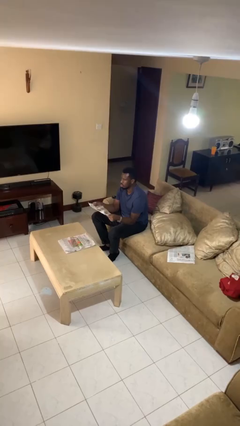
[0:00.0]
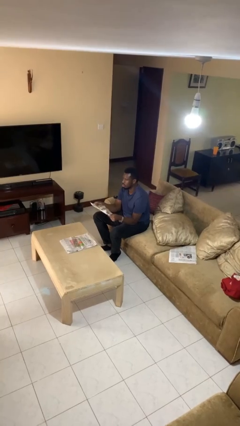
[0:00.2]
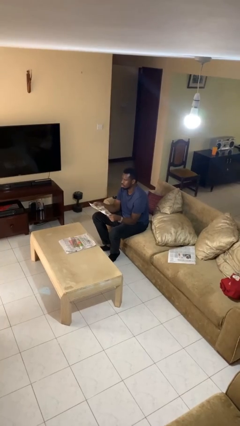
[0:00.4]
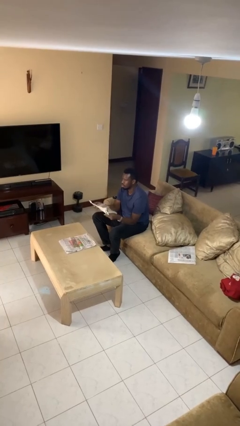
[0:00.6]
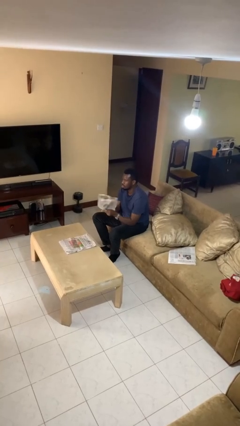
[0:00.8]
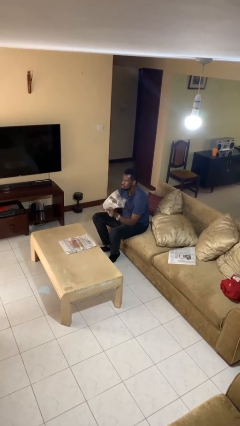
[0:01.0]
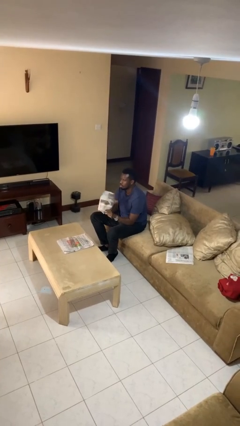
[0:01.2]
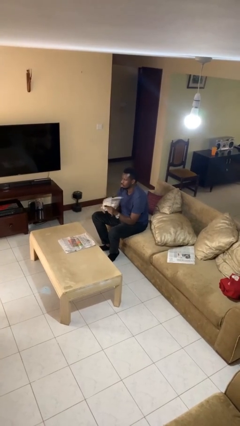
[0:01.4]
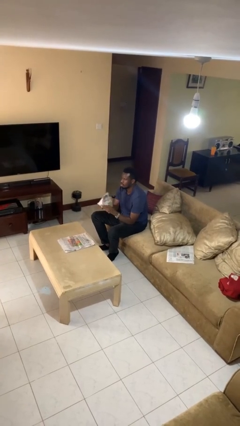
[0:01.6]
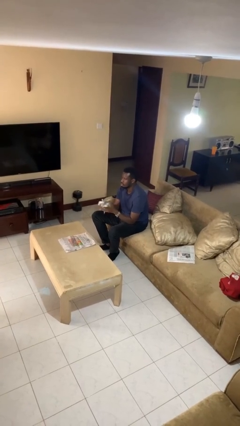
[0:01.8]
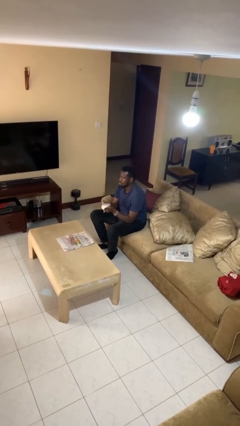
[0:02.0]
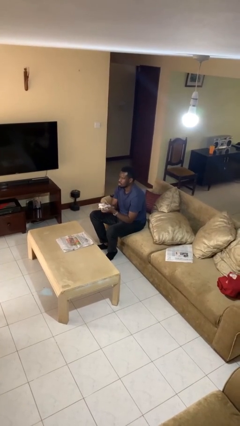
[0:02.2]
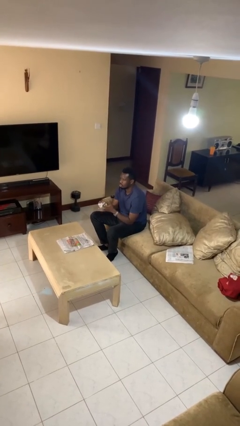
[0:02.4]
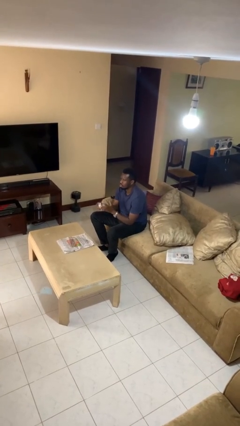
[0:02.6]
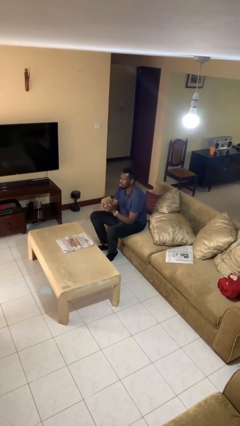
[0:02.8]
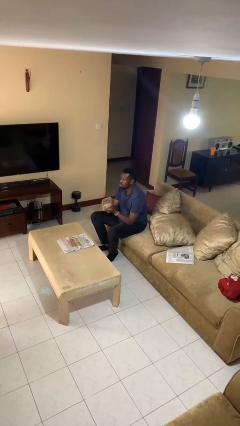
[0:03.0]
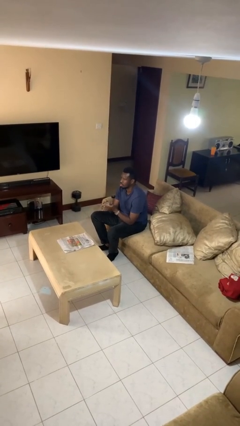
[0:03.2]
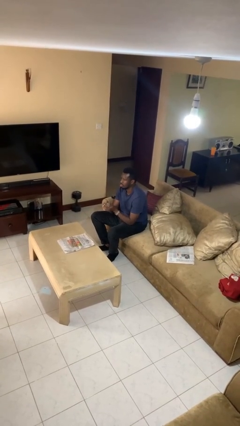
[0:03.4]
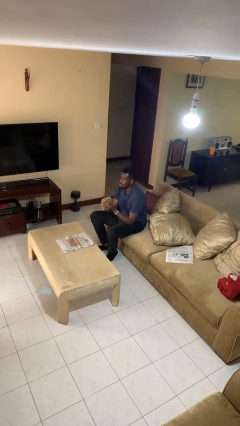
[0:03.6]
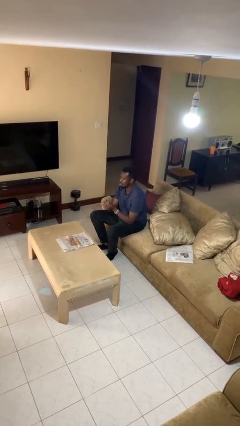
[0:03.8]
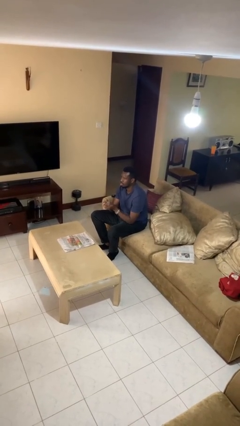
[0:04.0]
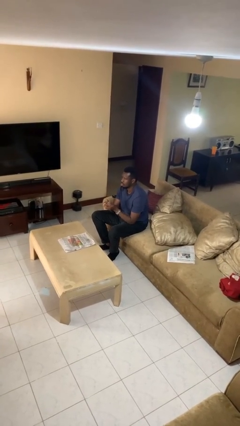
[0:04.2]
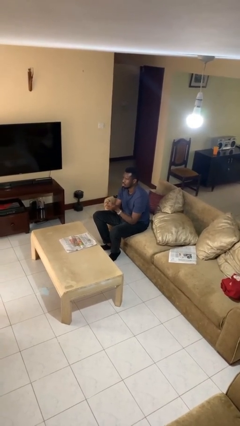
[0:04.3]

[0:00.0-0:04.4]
person crumples paper

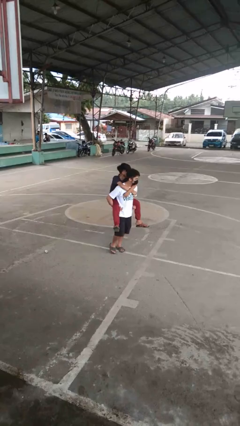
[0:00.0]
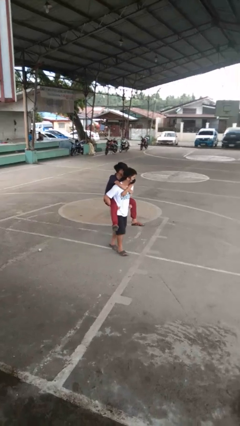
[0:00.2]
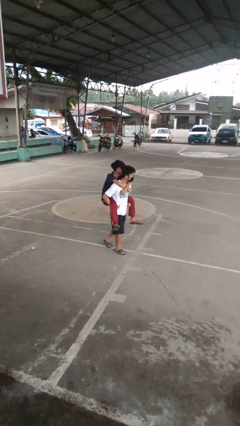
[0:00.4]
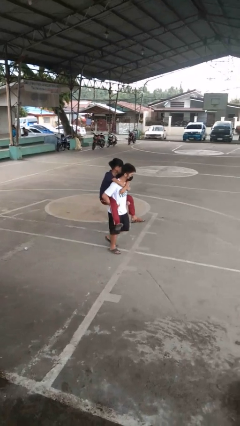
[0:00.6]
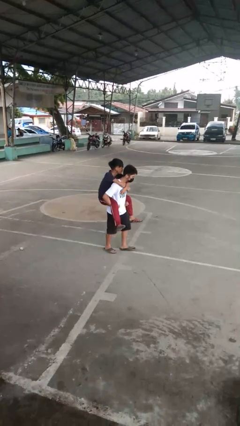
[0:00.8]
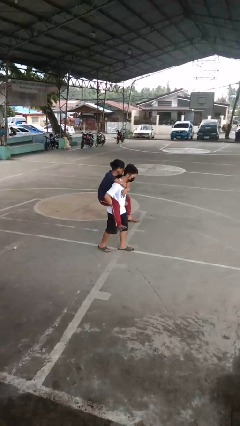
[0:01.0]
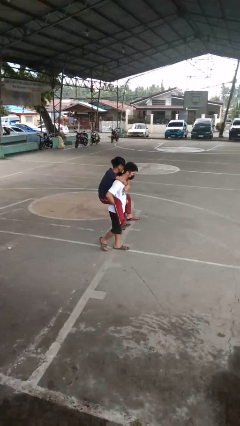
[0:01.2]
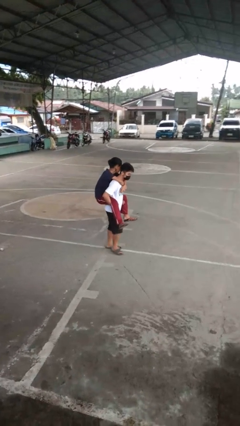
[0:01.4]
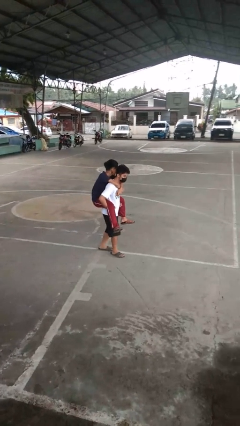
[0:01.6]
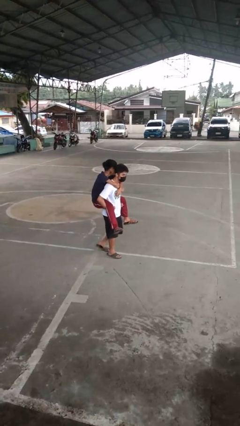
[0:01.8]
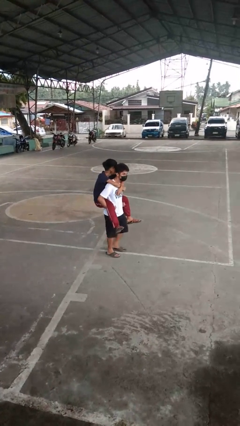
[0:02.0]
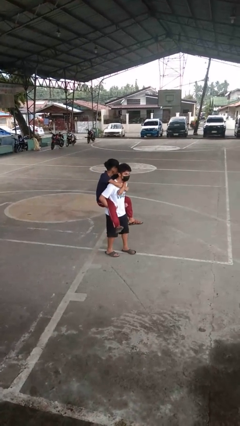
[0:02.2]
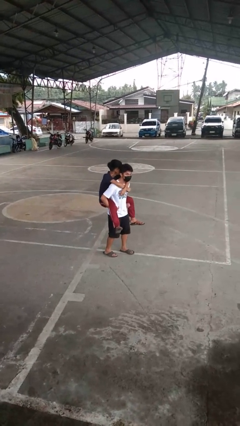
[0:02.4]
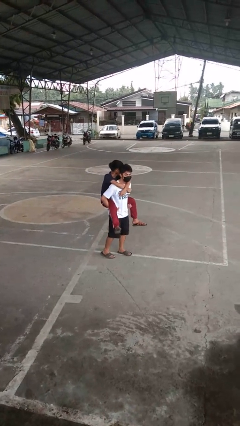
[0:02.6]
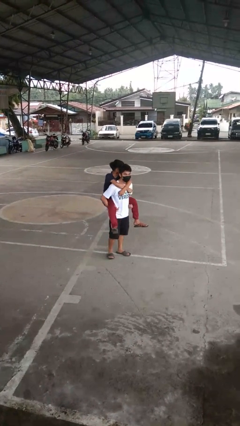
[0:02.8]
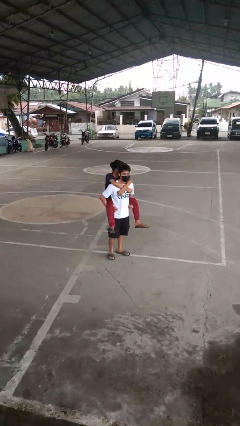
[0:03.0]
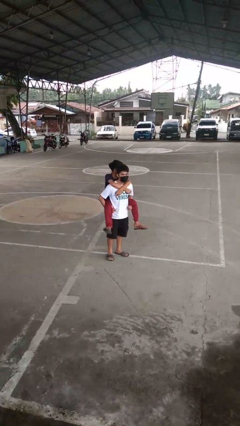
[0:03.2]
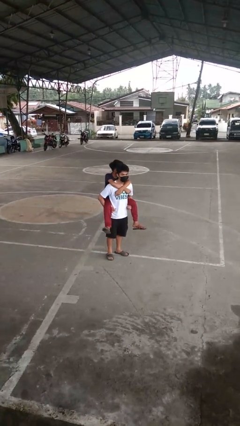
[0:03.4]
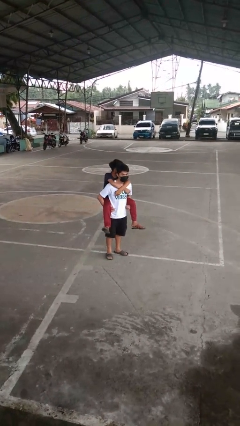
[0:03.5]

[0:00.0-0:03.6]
person carries person on back

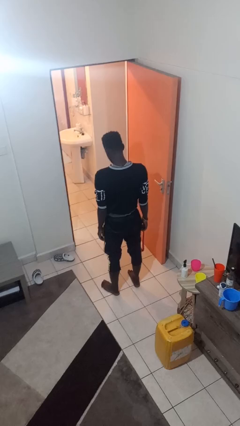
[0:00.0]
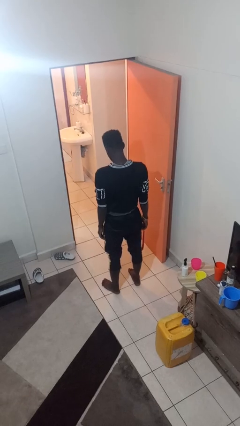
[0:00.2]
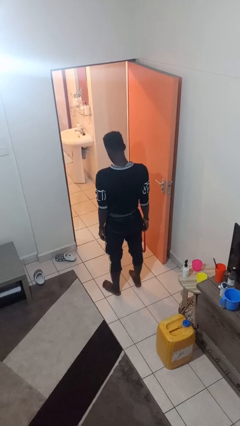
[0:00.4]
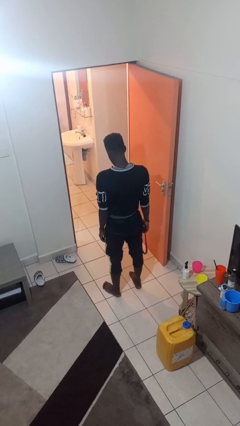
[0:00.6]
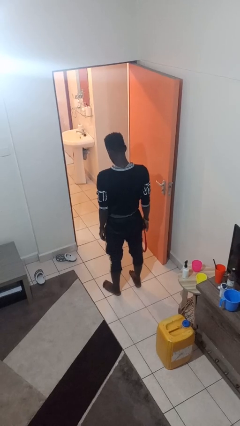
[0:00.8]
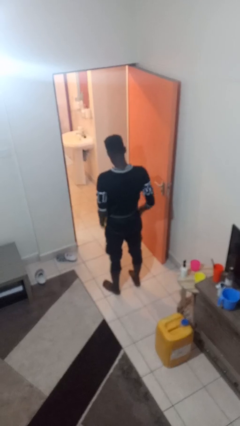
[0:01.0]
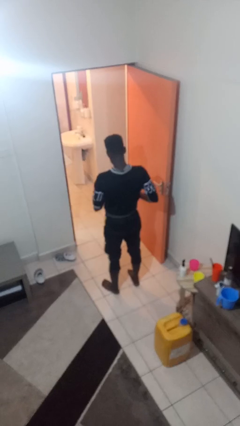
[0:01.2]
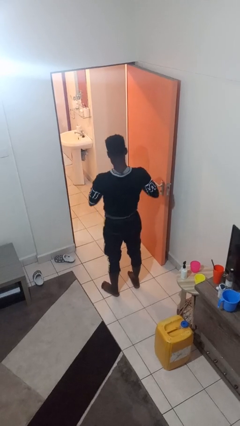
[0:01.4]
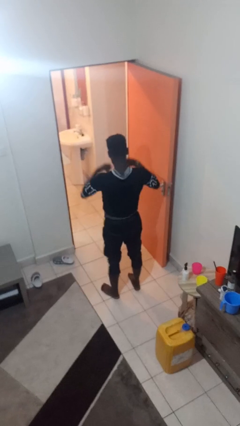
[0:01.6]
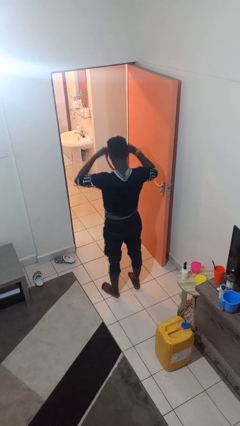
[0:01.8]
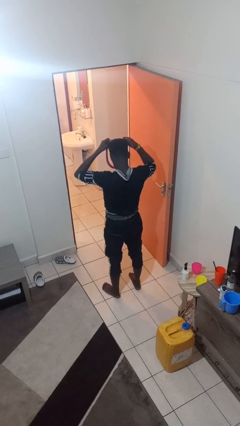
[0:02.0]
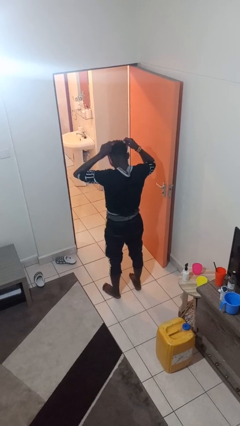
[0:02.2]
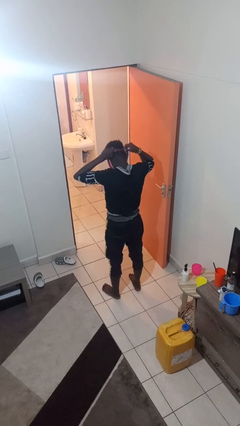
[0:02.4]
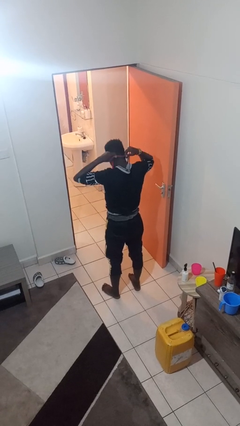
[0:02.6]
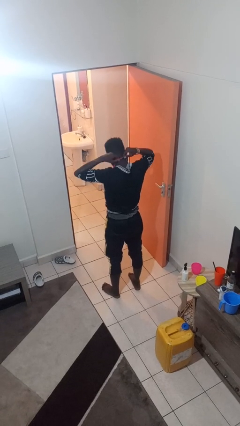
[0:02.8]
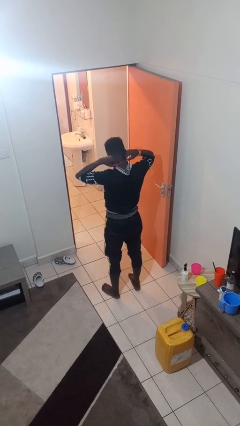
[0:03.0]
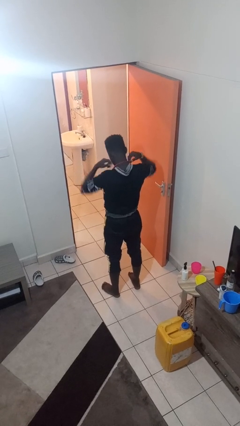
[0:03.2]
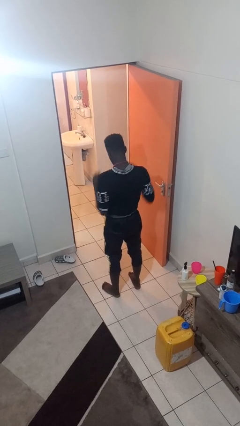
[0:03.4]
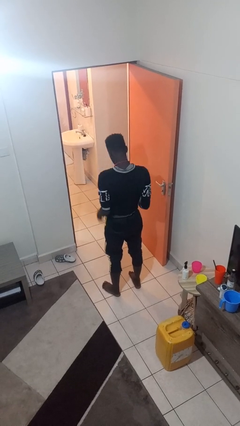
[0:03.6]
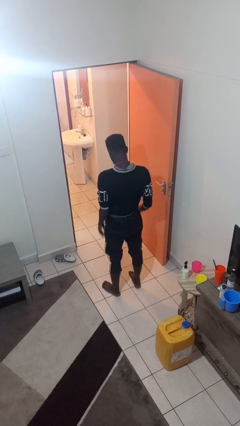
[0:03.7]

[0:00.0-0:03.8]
person puts on necklace

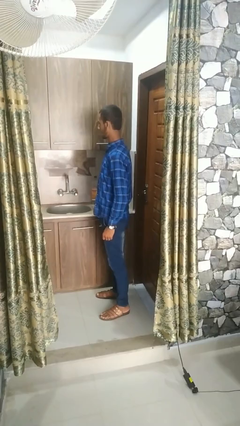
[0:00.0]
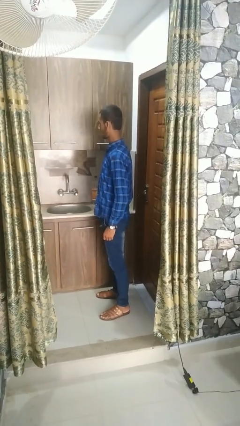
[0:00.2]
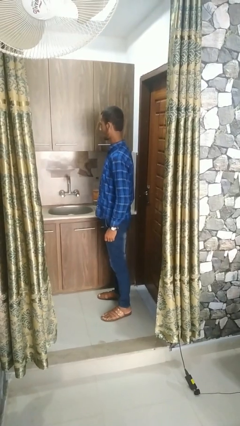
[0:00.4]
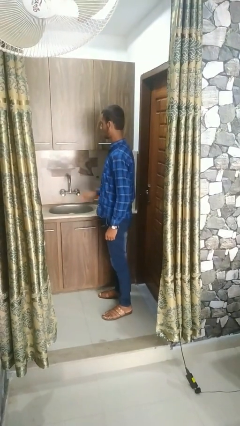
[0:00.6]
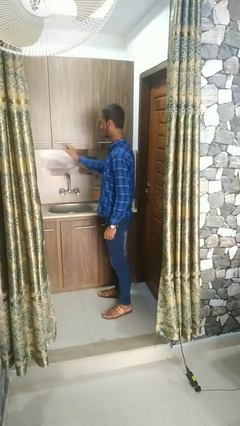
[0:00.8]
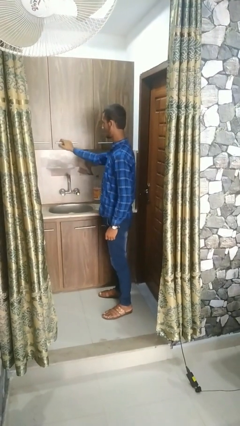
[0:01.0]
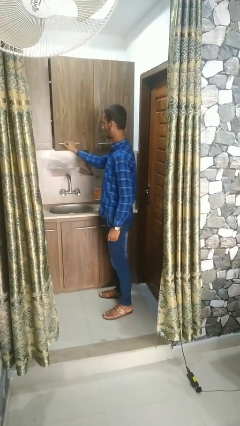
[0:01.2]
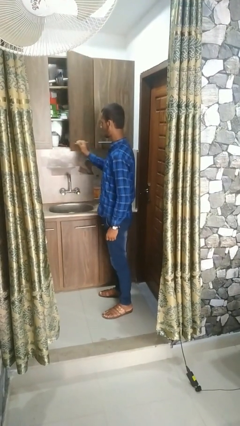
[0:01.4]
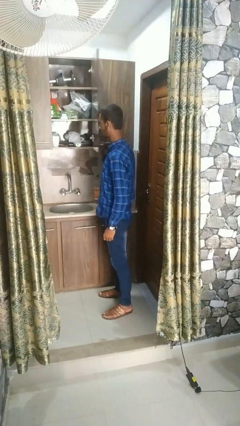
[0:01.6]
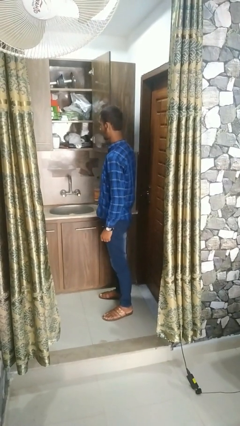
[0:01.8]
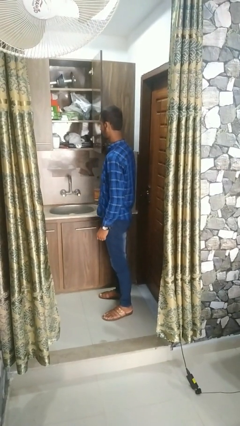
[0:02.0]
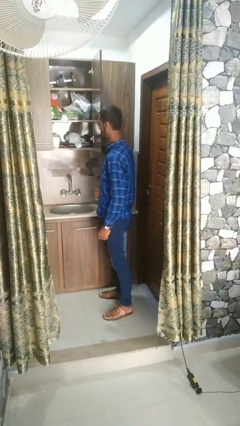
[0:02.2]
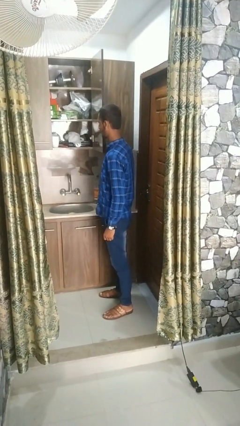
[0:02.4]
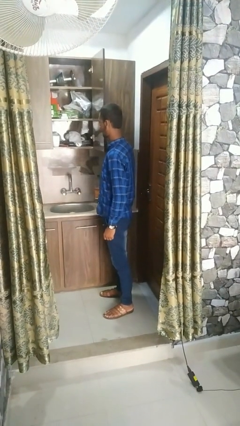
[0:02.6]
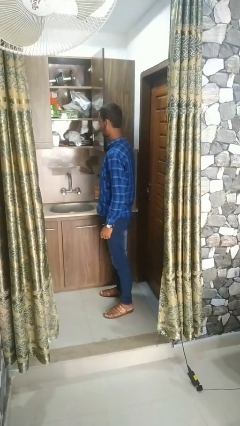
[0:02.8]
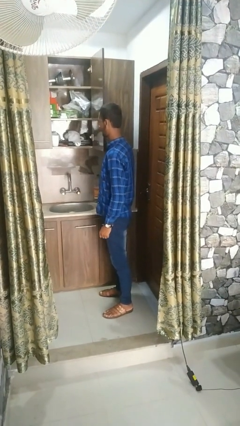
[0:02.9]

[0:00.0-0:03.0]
person opens cabinet

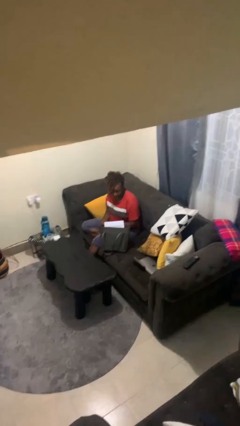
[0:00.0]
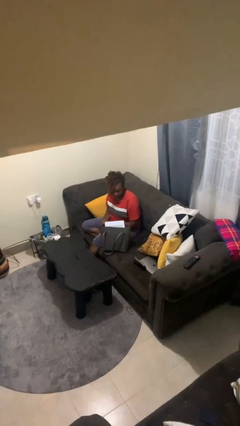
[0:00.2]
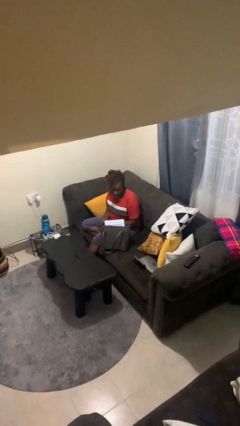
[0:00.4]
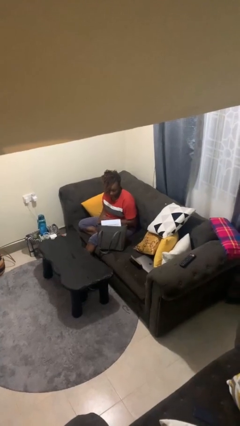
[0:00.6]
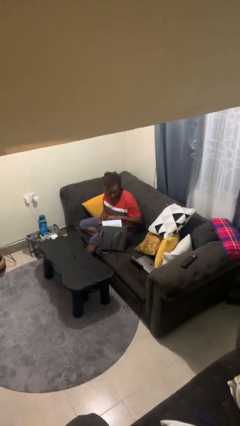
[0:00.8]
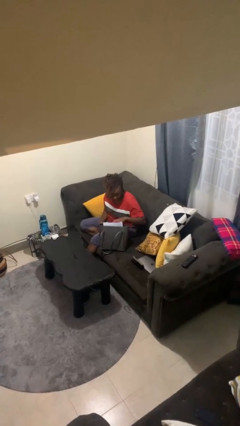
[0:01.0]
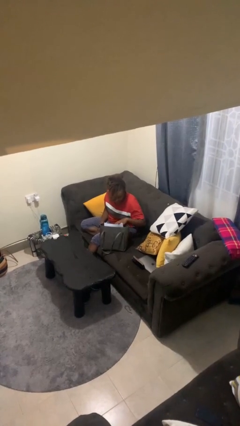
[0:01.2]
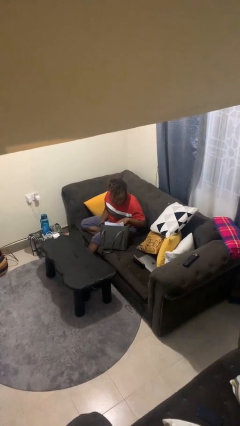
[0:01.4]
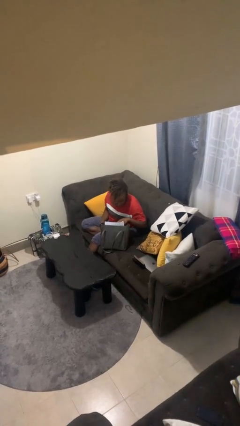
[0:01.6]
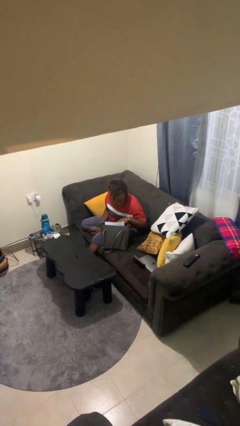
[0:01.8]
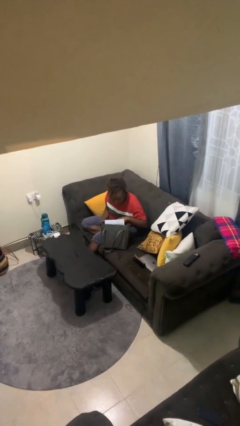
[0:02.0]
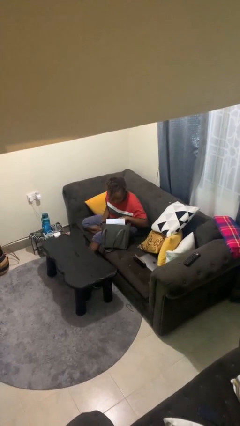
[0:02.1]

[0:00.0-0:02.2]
person searches in purse

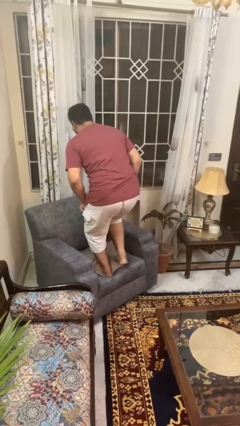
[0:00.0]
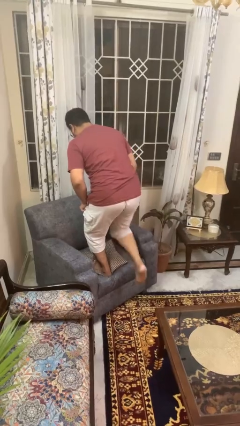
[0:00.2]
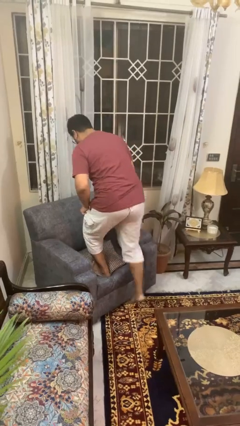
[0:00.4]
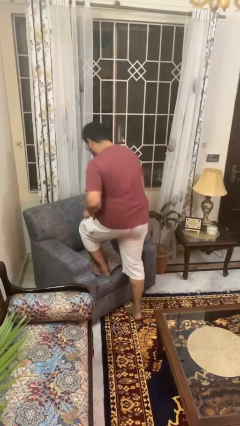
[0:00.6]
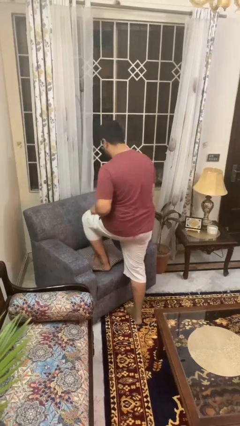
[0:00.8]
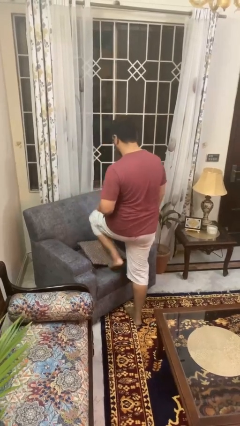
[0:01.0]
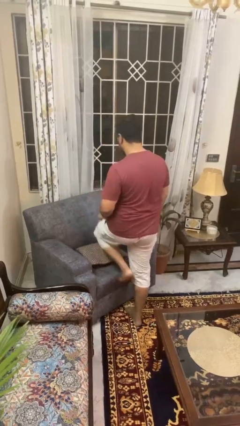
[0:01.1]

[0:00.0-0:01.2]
person climbs off couch
